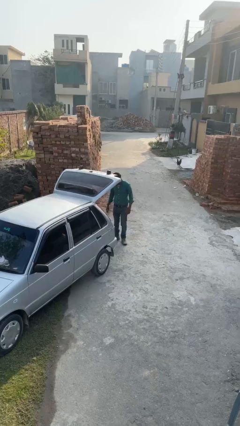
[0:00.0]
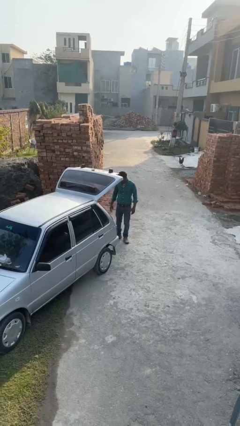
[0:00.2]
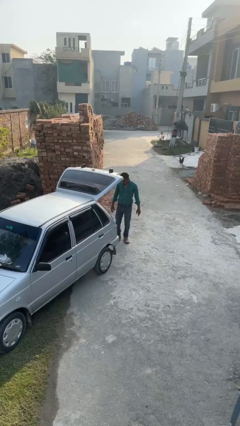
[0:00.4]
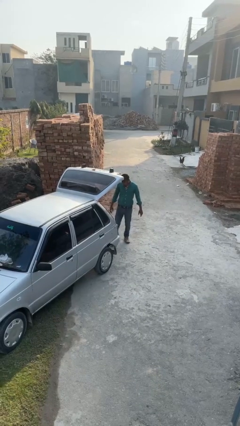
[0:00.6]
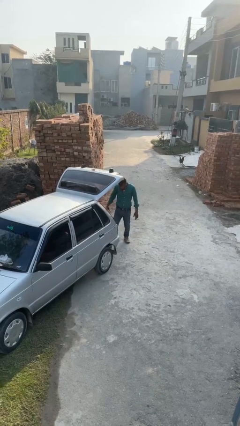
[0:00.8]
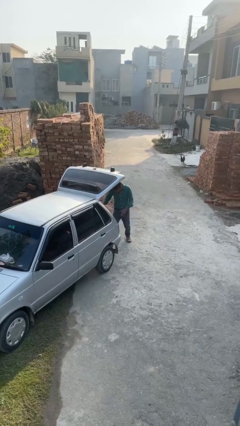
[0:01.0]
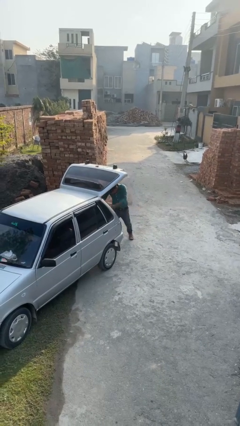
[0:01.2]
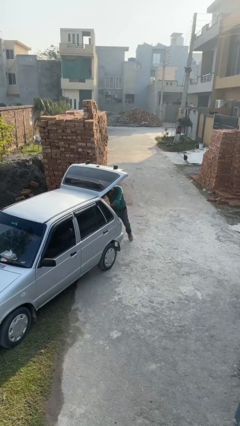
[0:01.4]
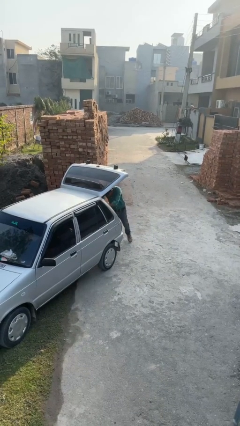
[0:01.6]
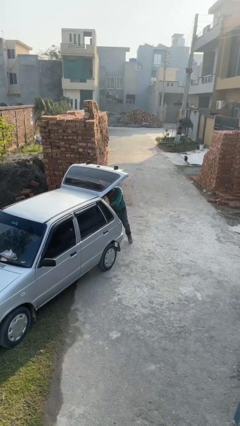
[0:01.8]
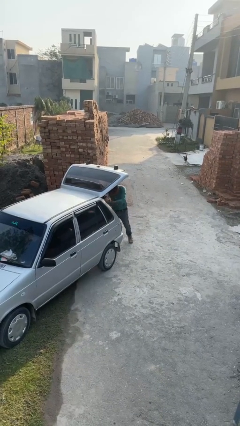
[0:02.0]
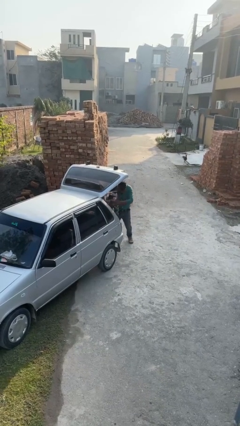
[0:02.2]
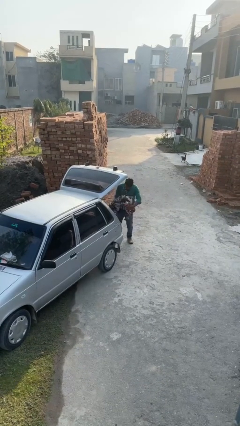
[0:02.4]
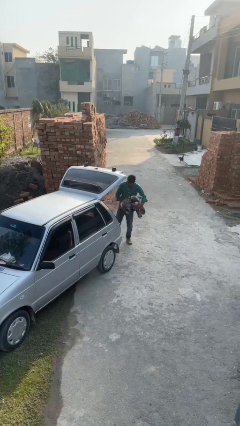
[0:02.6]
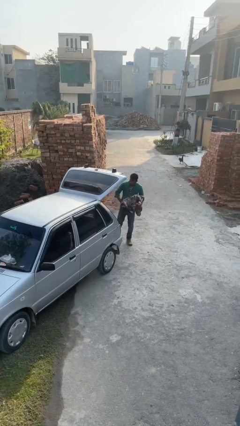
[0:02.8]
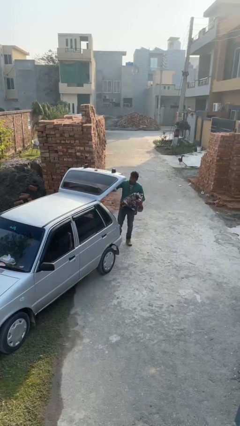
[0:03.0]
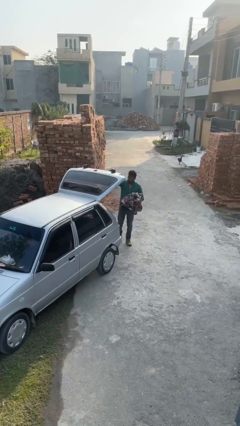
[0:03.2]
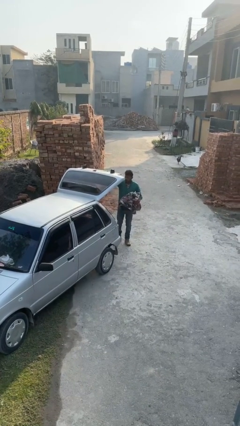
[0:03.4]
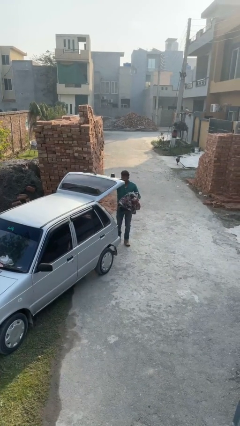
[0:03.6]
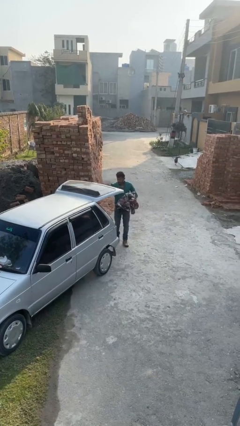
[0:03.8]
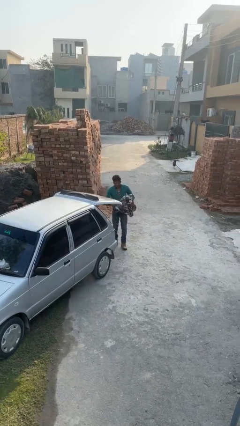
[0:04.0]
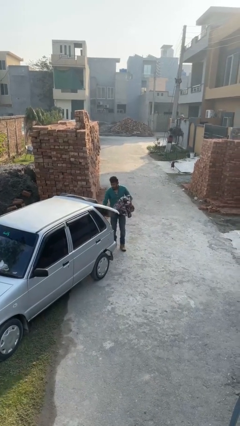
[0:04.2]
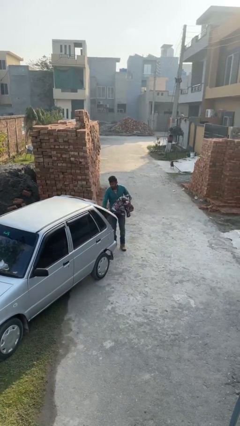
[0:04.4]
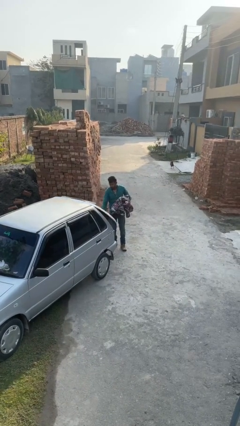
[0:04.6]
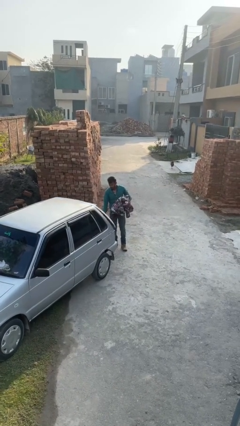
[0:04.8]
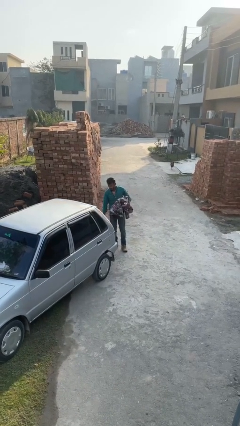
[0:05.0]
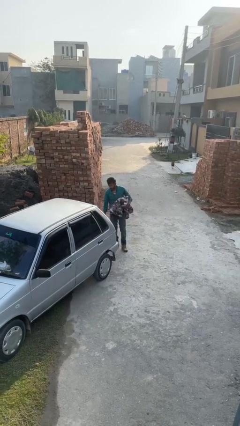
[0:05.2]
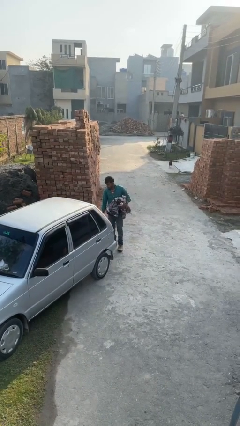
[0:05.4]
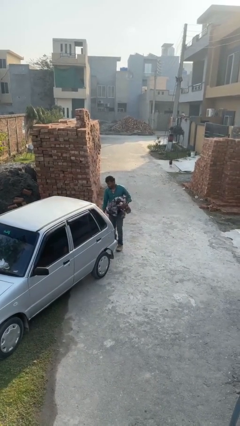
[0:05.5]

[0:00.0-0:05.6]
person unloads car

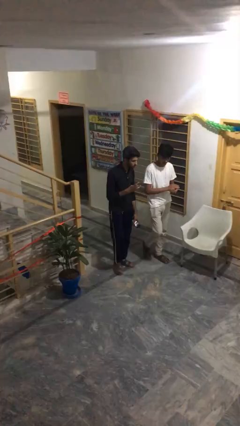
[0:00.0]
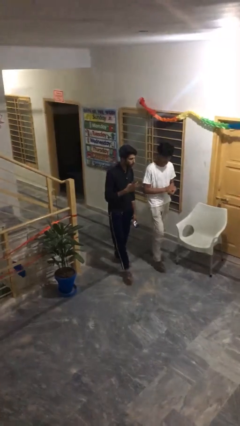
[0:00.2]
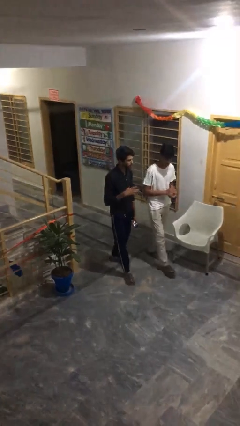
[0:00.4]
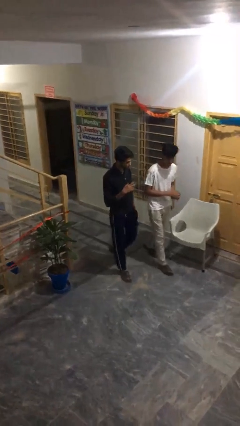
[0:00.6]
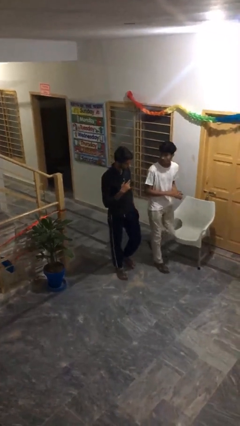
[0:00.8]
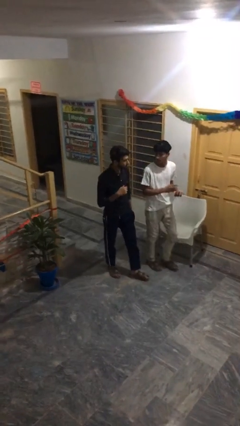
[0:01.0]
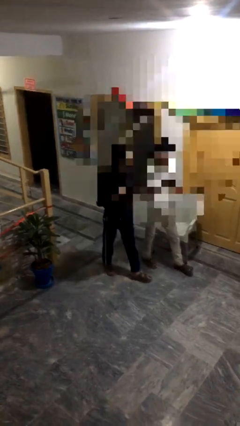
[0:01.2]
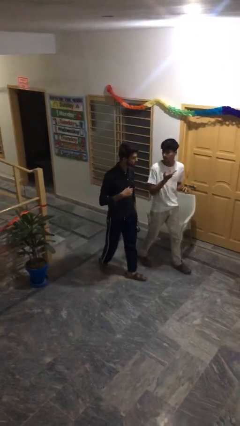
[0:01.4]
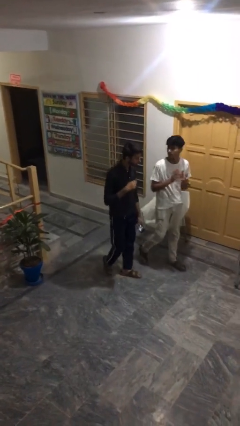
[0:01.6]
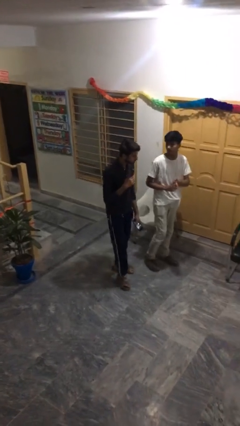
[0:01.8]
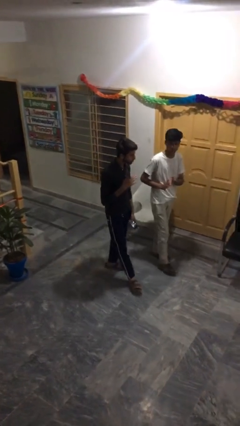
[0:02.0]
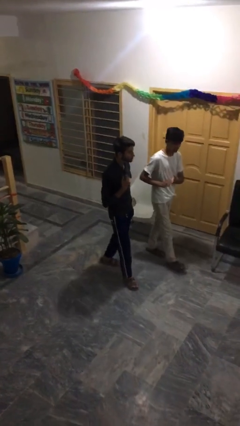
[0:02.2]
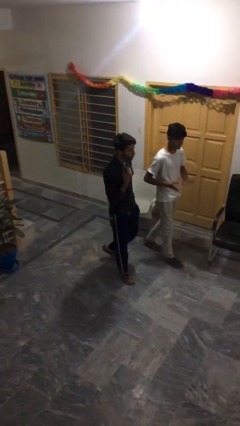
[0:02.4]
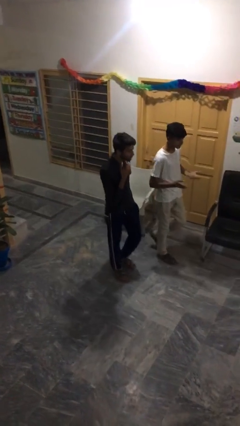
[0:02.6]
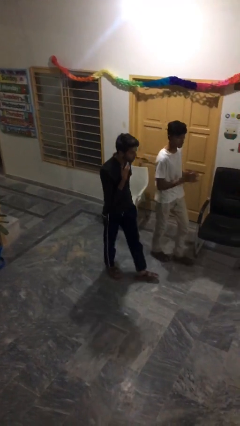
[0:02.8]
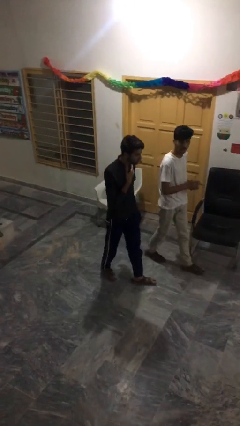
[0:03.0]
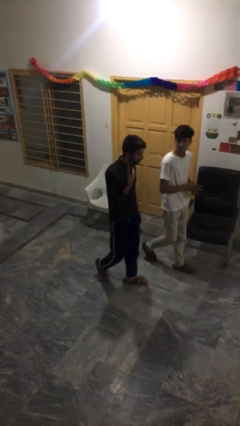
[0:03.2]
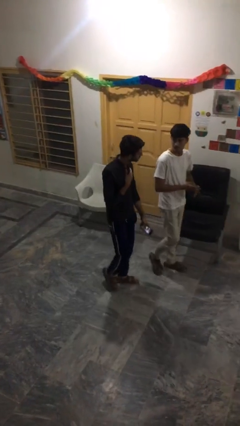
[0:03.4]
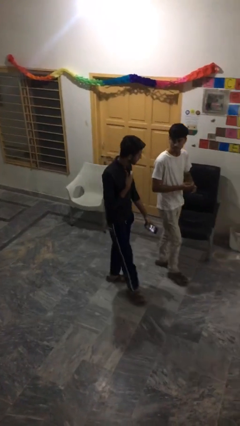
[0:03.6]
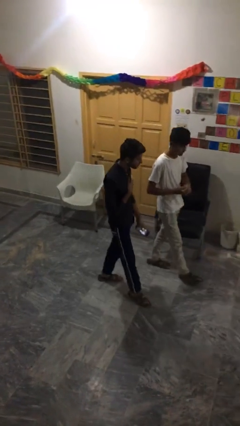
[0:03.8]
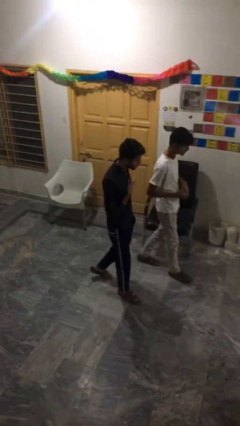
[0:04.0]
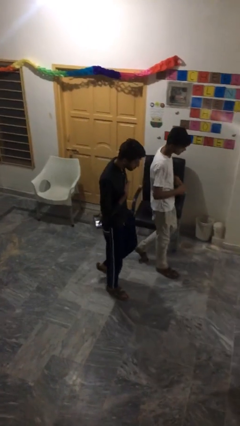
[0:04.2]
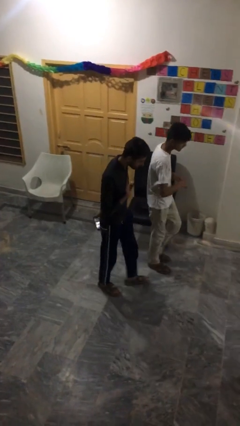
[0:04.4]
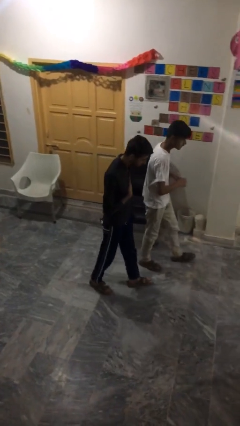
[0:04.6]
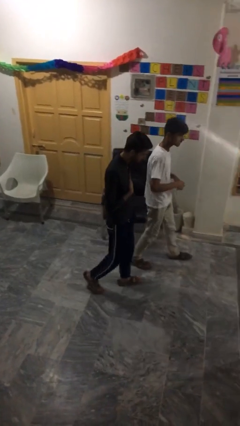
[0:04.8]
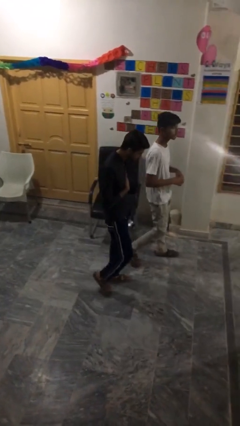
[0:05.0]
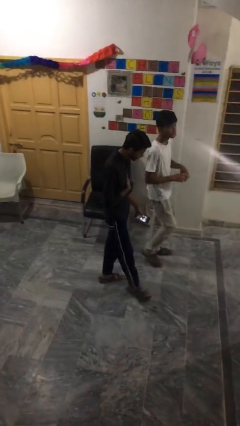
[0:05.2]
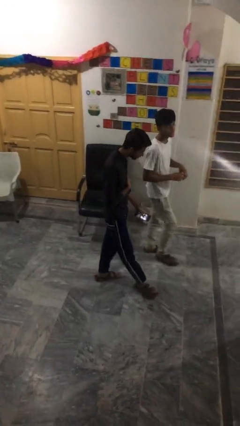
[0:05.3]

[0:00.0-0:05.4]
person talks to person

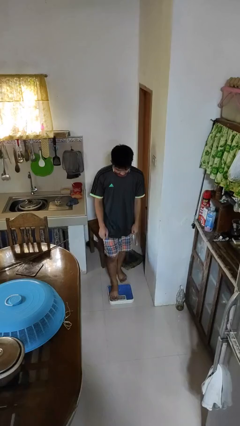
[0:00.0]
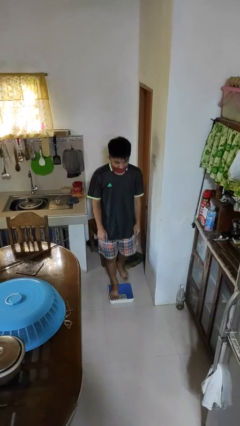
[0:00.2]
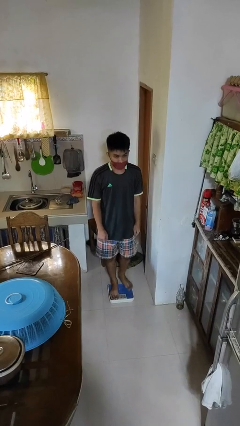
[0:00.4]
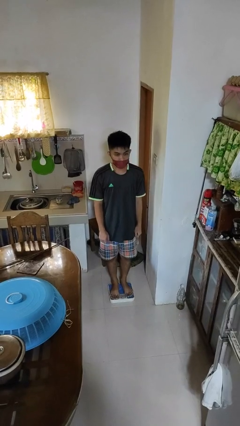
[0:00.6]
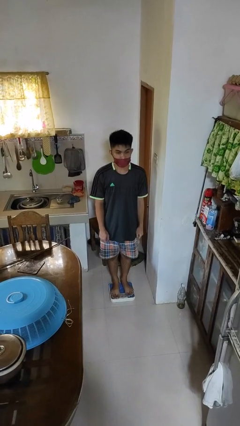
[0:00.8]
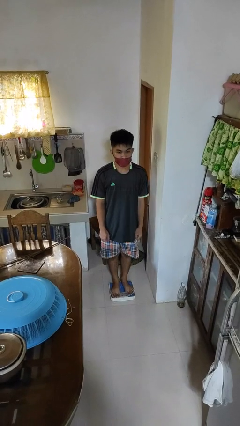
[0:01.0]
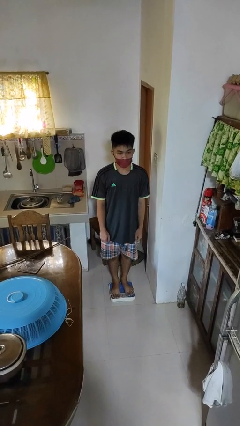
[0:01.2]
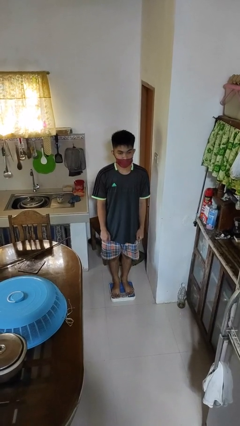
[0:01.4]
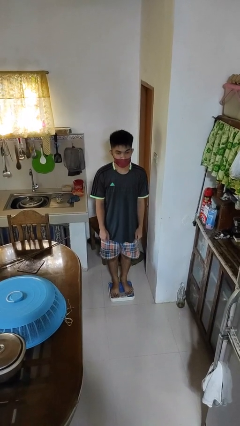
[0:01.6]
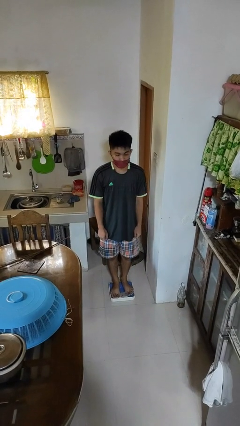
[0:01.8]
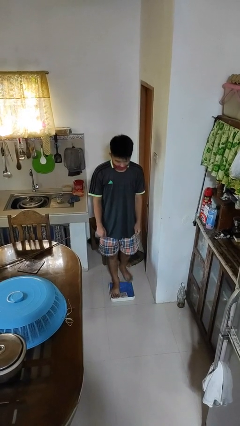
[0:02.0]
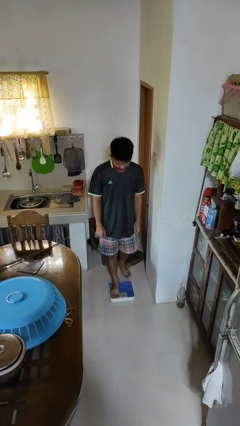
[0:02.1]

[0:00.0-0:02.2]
person uses bodyweight scale

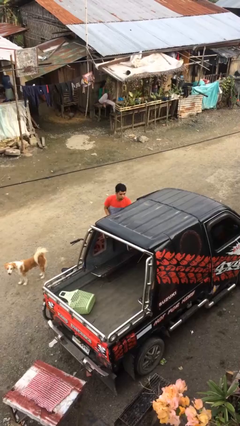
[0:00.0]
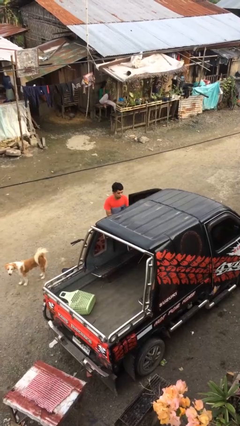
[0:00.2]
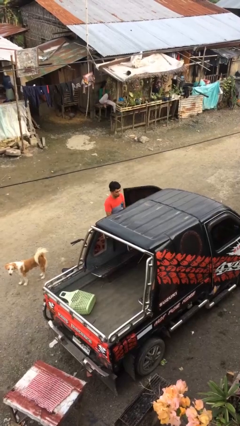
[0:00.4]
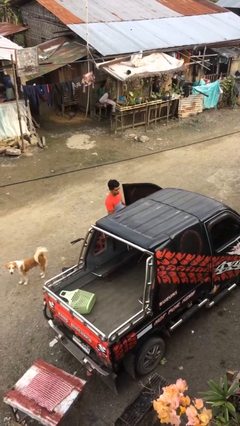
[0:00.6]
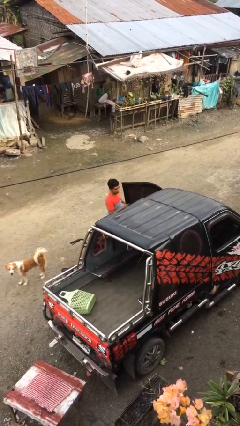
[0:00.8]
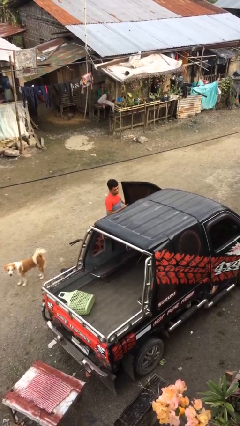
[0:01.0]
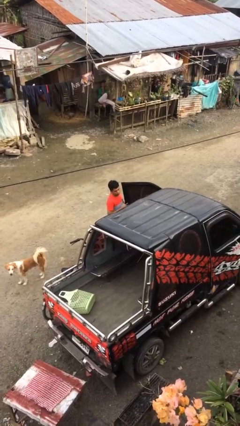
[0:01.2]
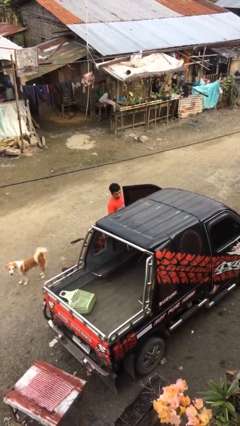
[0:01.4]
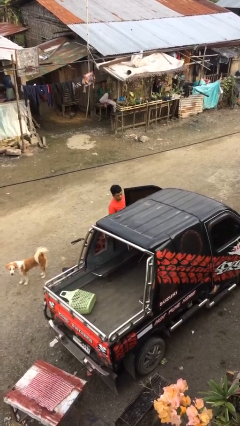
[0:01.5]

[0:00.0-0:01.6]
person opens car door

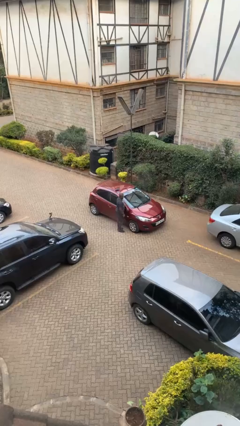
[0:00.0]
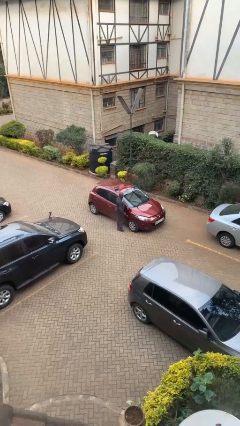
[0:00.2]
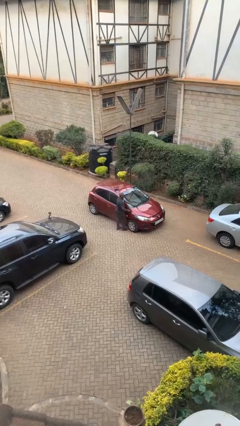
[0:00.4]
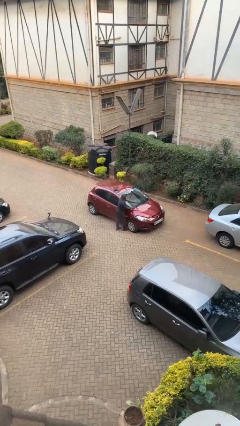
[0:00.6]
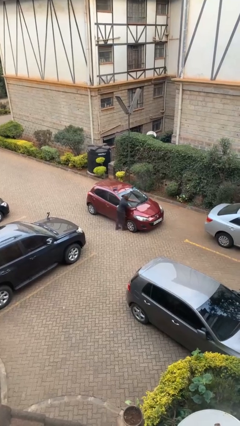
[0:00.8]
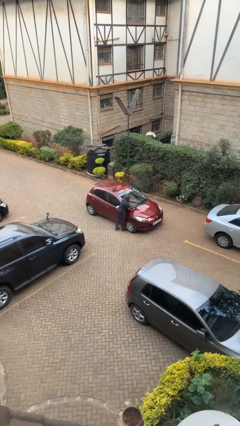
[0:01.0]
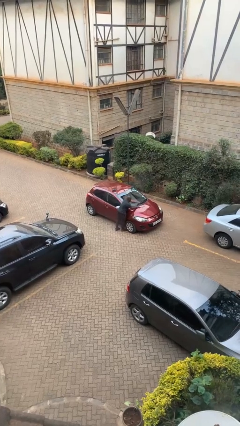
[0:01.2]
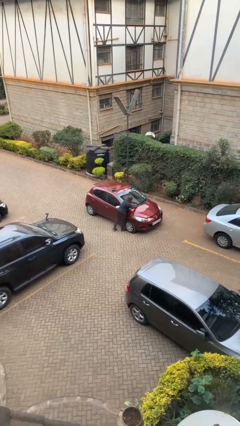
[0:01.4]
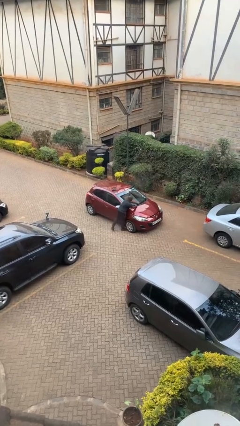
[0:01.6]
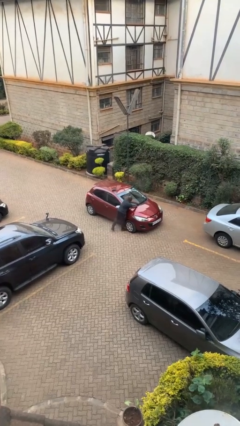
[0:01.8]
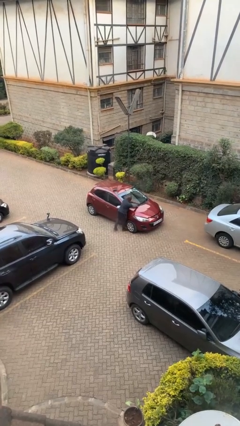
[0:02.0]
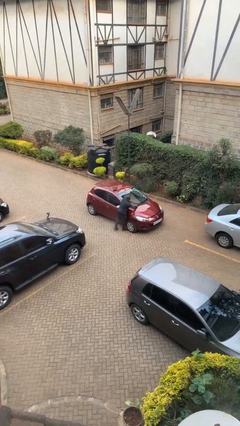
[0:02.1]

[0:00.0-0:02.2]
person flips down car wipers

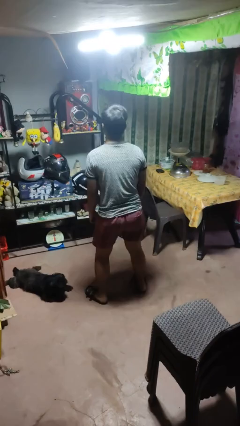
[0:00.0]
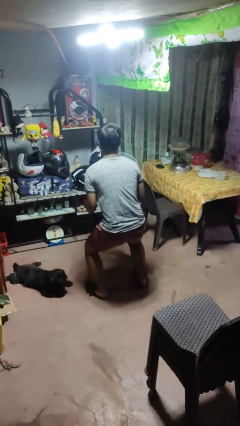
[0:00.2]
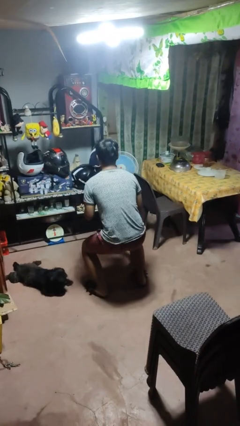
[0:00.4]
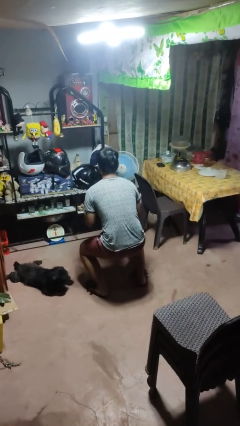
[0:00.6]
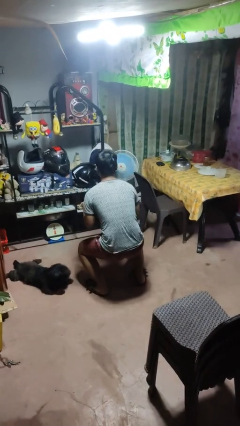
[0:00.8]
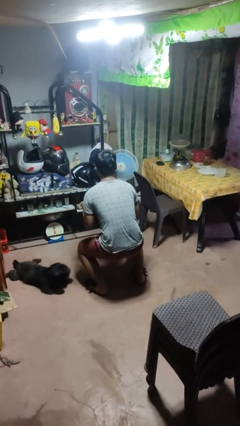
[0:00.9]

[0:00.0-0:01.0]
person squats
